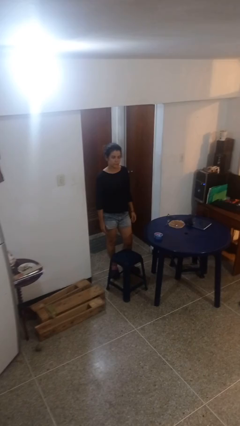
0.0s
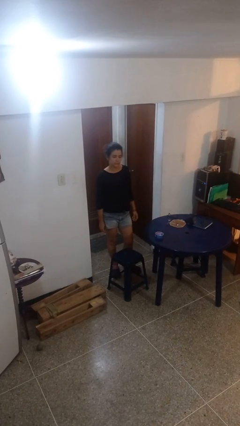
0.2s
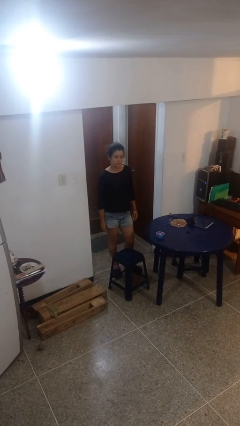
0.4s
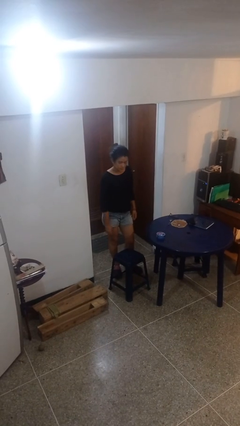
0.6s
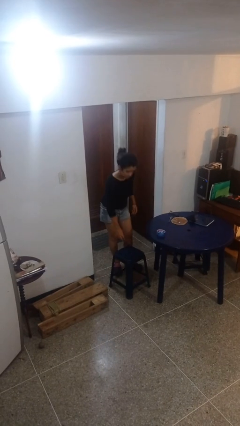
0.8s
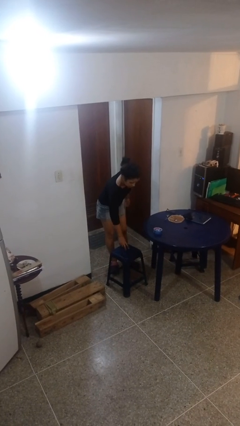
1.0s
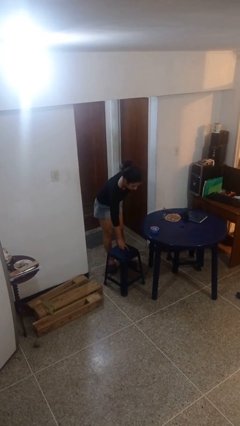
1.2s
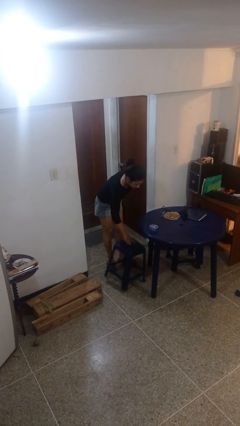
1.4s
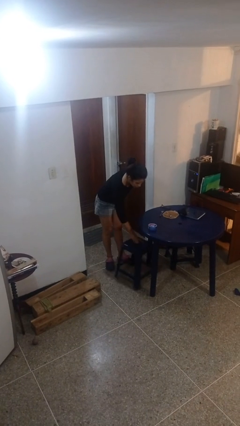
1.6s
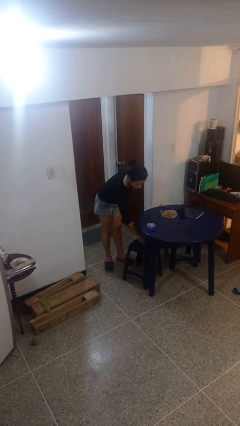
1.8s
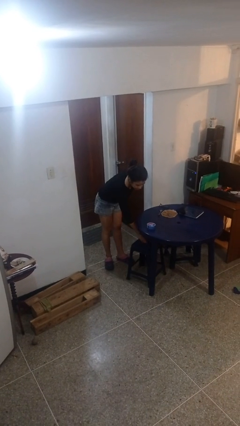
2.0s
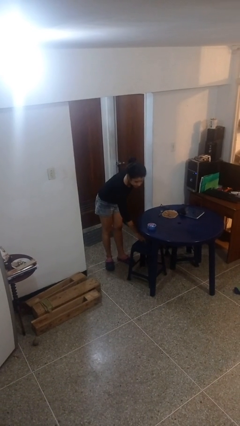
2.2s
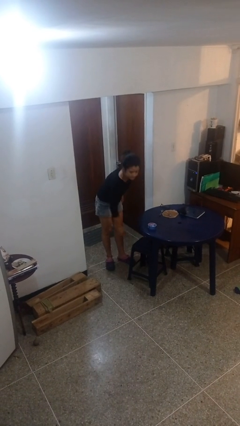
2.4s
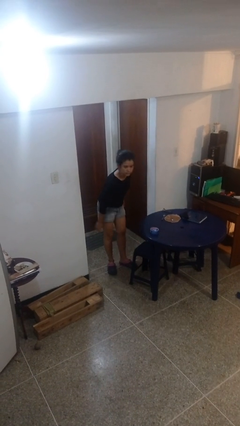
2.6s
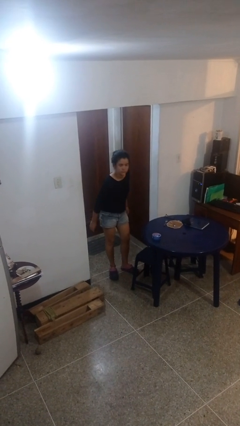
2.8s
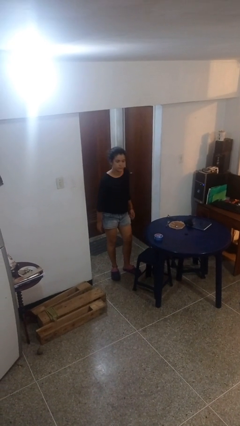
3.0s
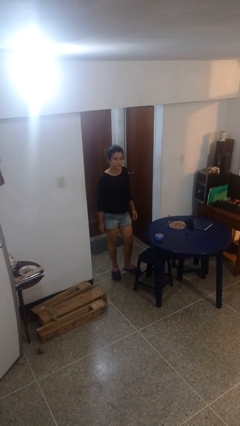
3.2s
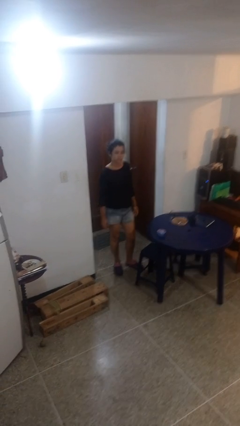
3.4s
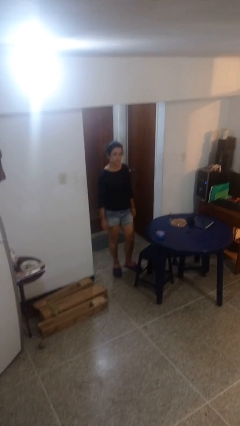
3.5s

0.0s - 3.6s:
person pushes in chair

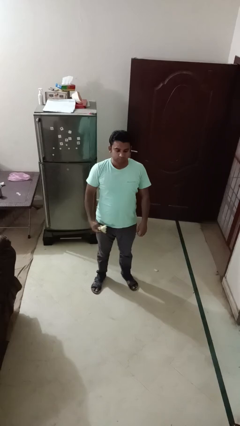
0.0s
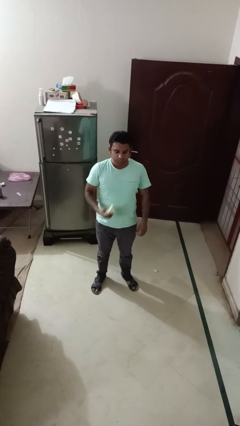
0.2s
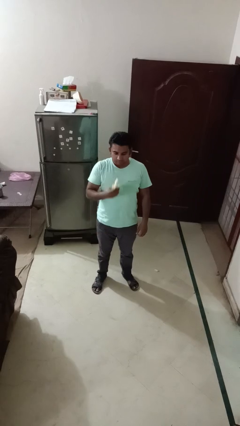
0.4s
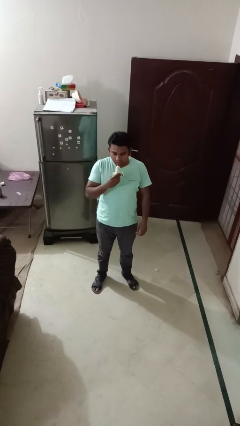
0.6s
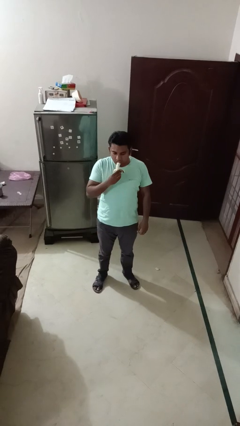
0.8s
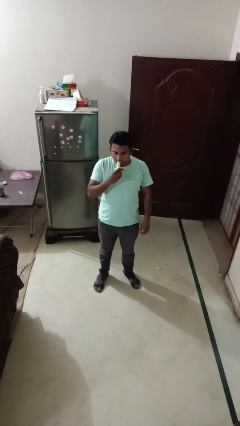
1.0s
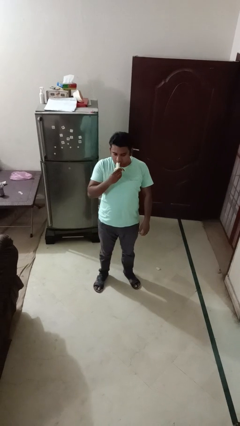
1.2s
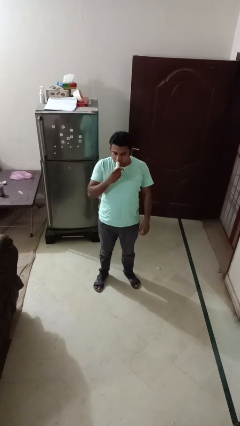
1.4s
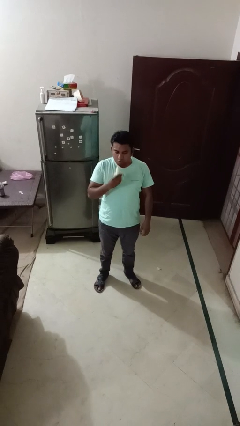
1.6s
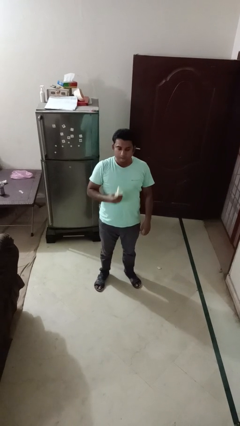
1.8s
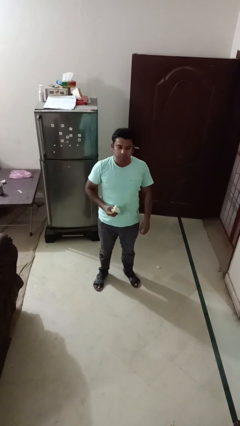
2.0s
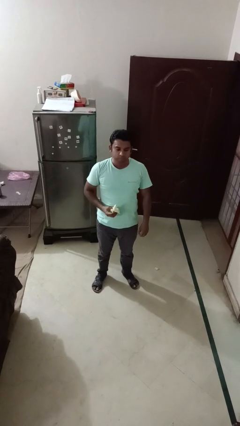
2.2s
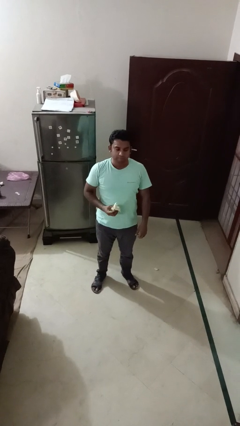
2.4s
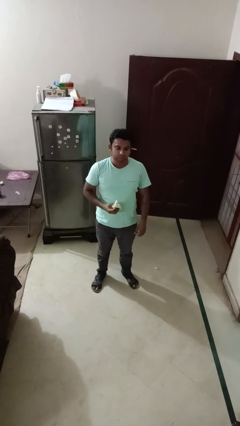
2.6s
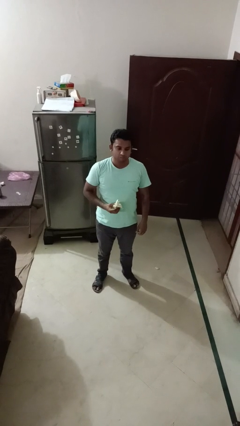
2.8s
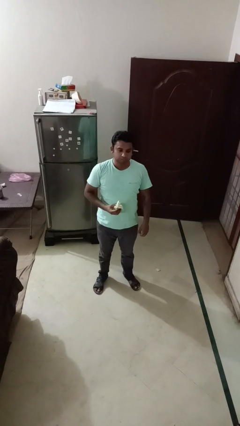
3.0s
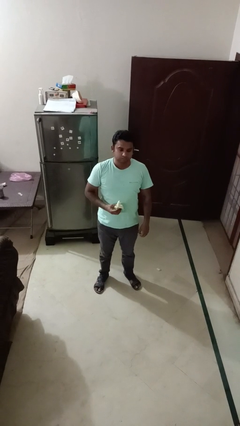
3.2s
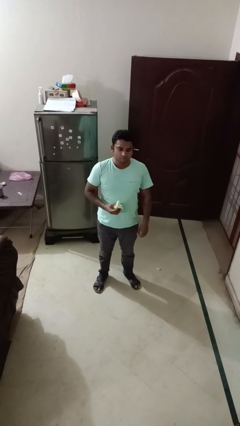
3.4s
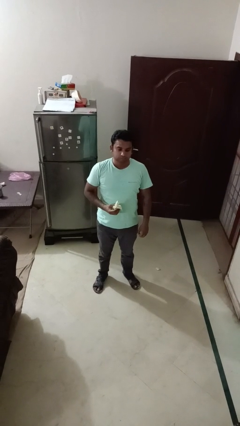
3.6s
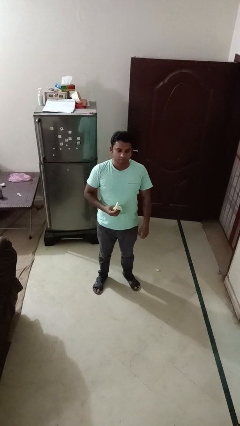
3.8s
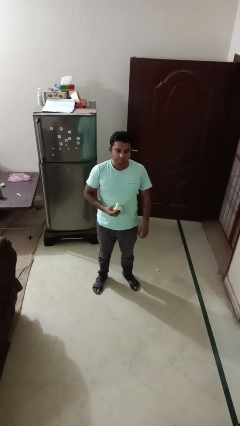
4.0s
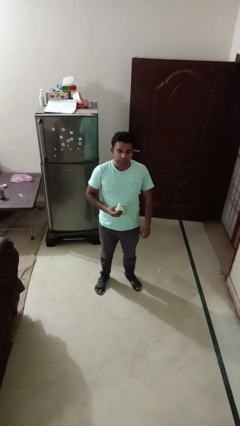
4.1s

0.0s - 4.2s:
person eats banana

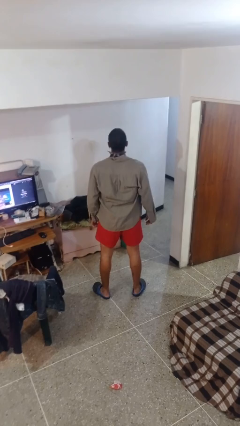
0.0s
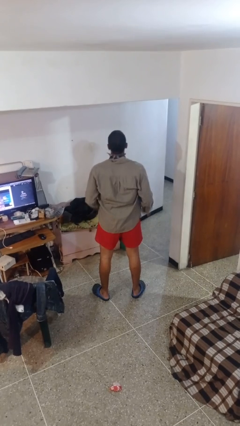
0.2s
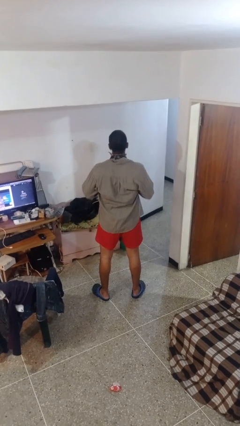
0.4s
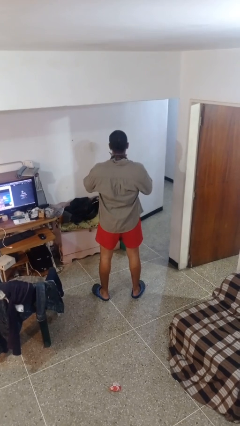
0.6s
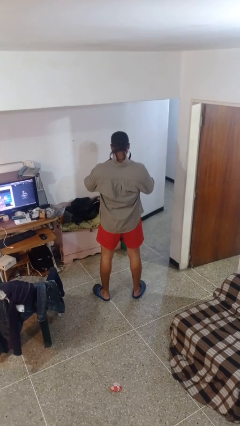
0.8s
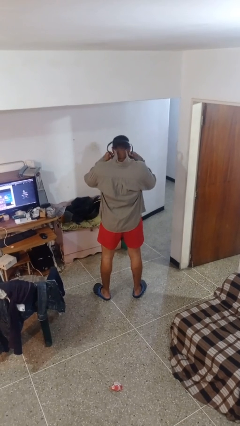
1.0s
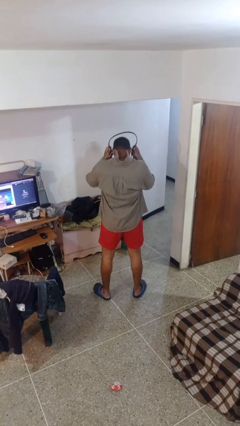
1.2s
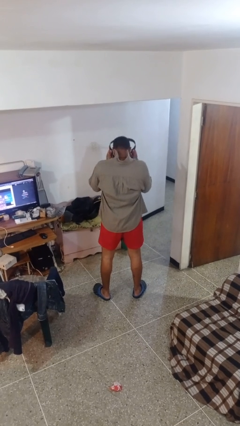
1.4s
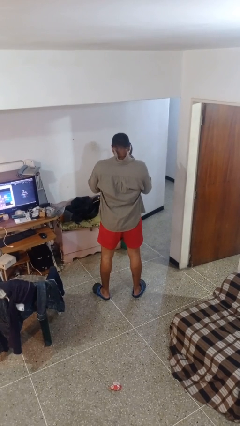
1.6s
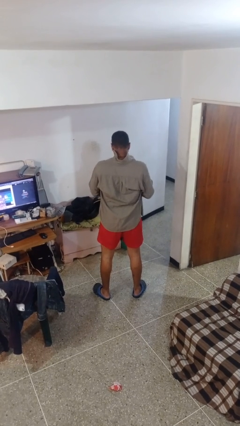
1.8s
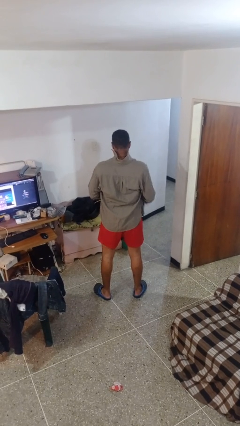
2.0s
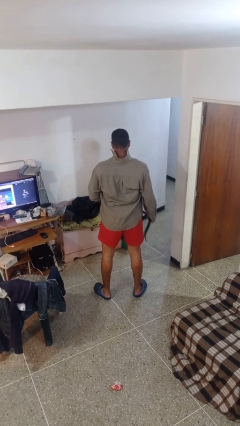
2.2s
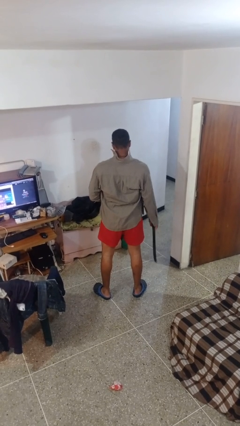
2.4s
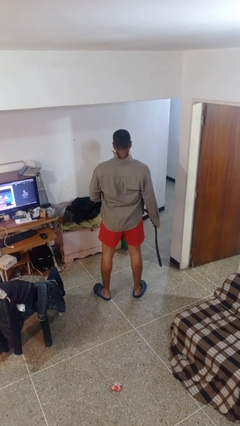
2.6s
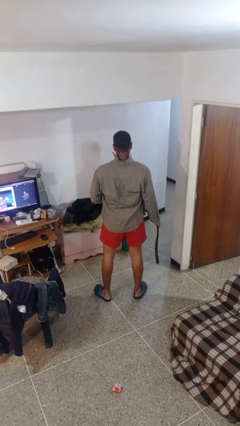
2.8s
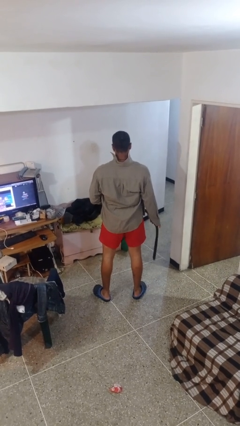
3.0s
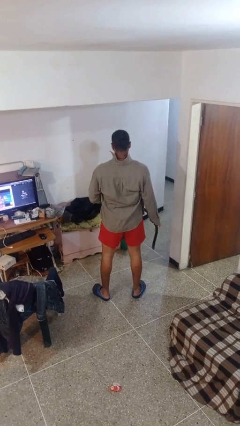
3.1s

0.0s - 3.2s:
person takes off necktie

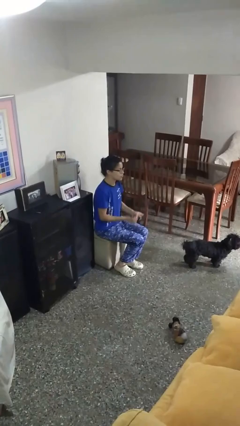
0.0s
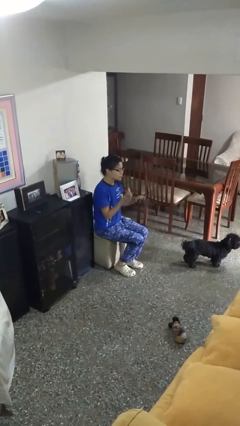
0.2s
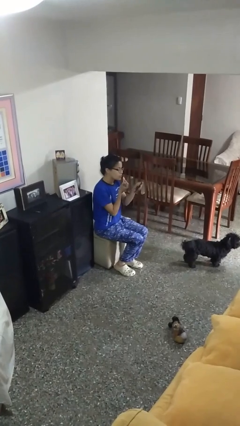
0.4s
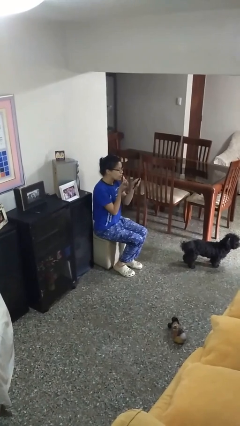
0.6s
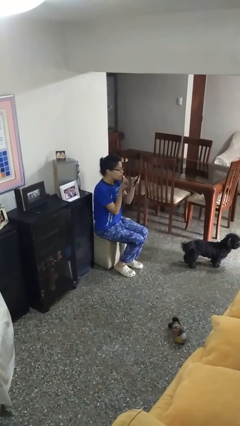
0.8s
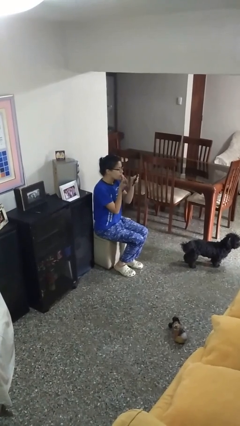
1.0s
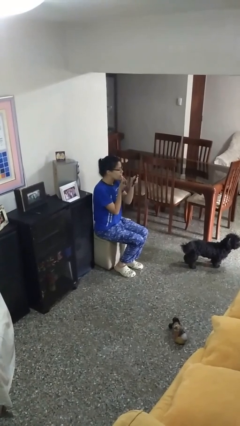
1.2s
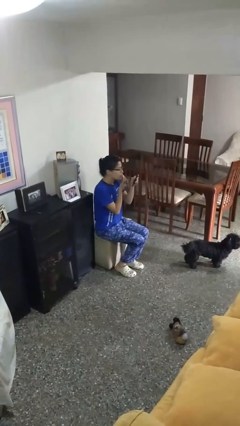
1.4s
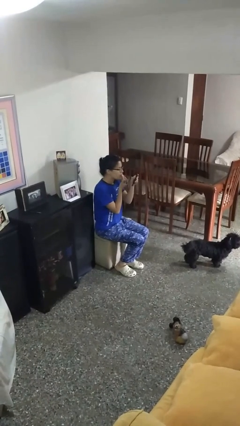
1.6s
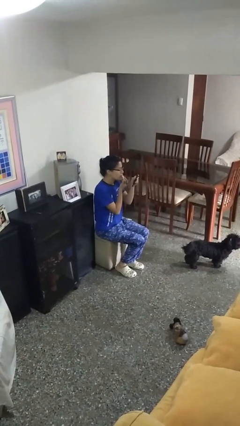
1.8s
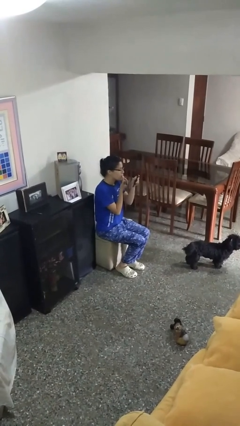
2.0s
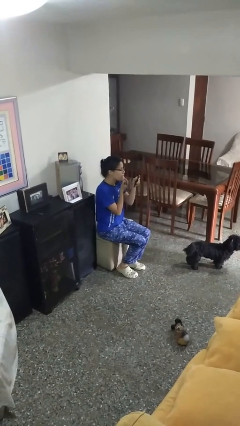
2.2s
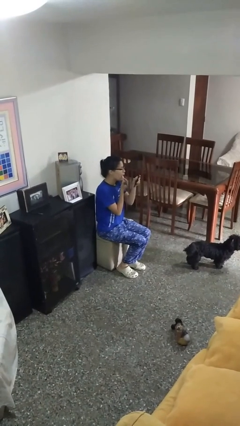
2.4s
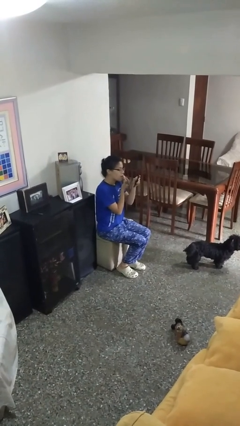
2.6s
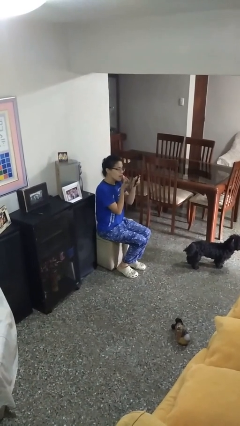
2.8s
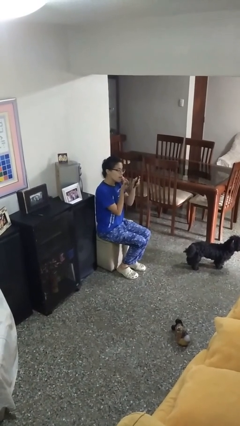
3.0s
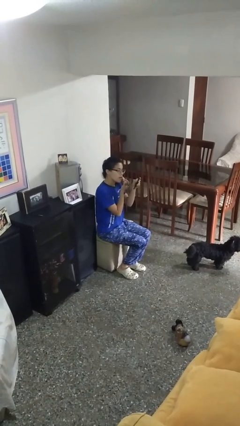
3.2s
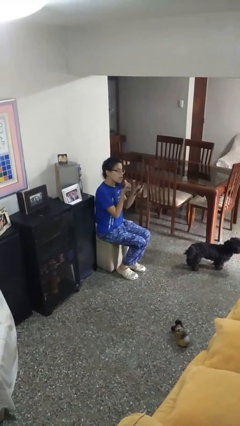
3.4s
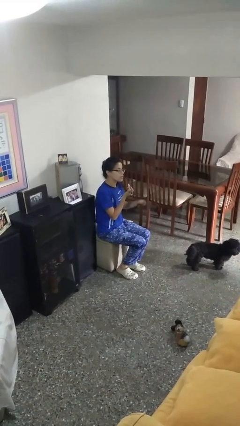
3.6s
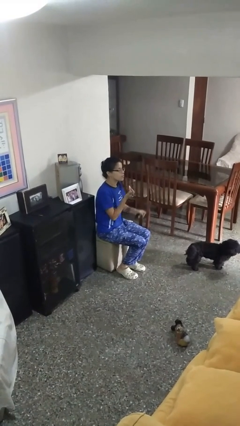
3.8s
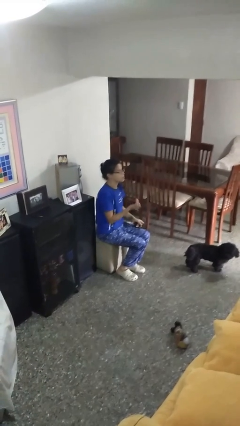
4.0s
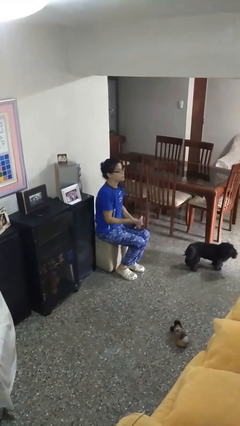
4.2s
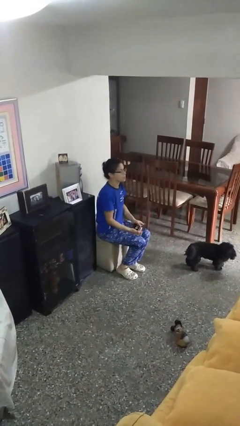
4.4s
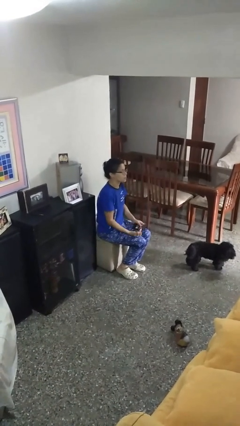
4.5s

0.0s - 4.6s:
person applies lip makeup

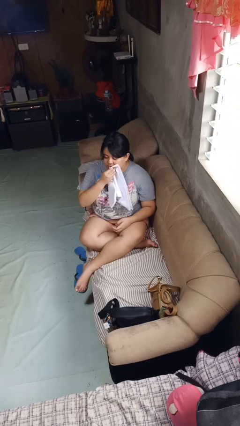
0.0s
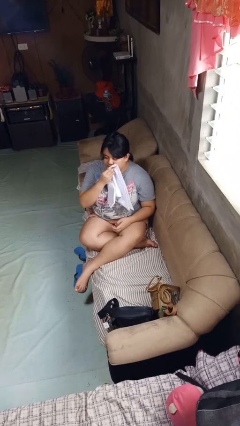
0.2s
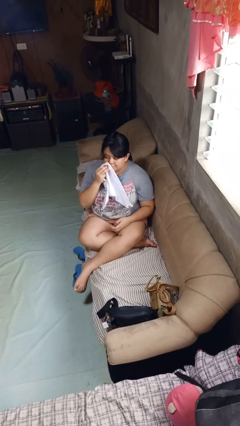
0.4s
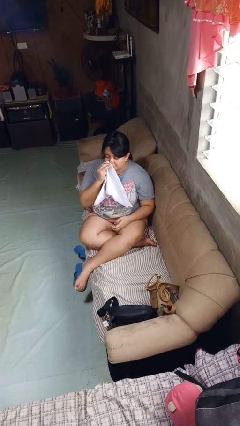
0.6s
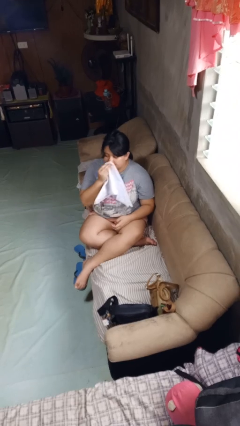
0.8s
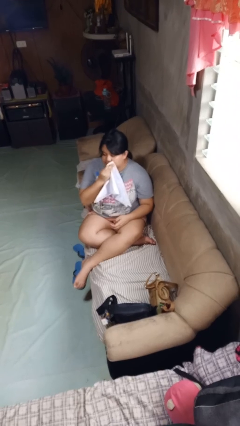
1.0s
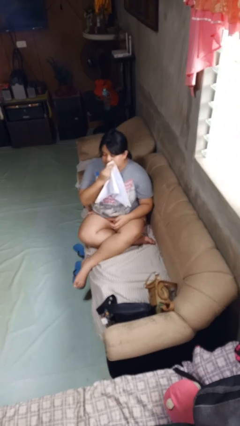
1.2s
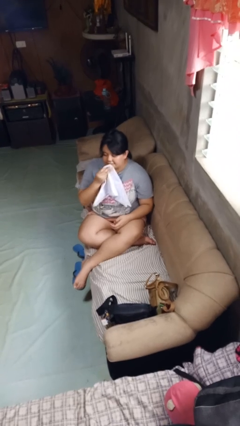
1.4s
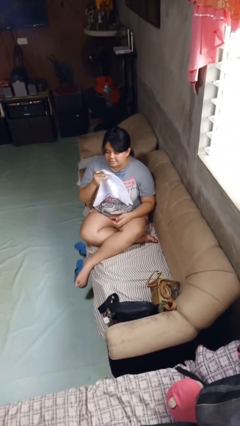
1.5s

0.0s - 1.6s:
person wipes mouth with napkin
